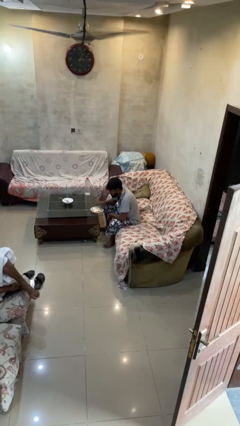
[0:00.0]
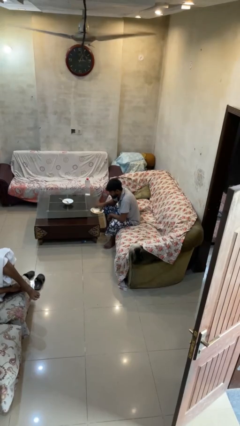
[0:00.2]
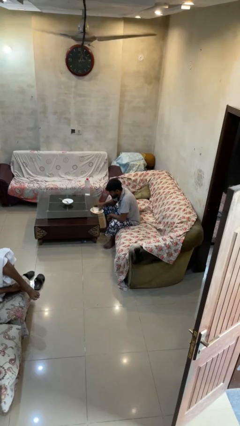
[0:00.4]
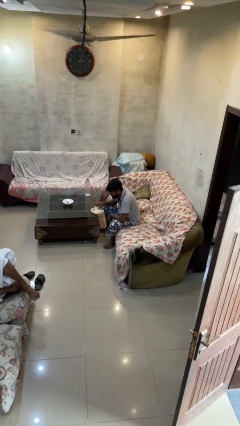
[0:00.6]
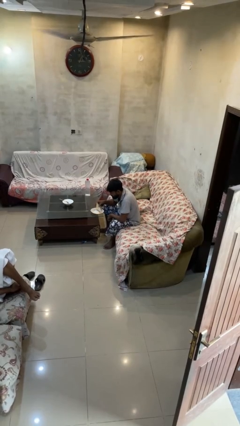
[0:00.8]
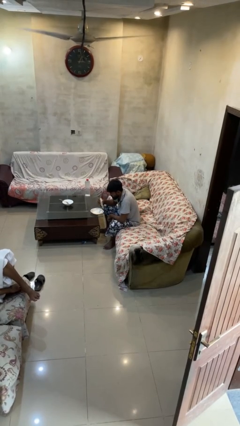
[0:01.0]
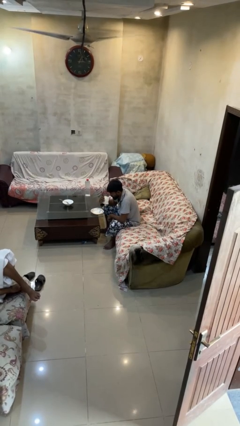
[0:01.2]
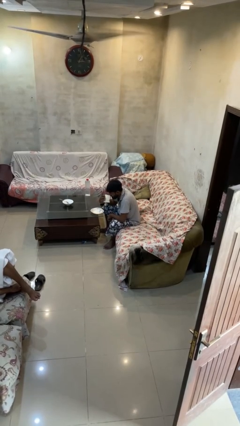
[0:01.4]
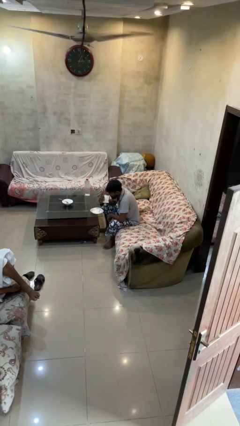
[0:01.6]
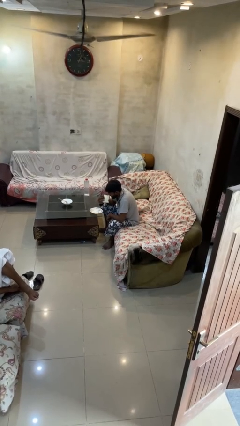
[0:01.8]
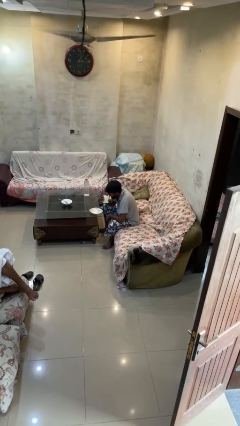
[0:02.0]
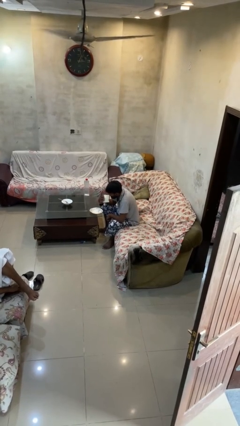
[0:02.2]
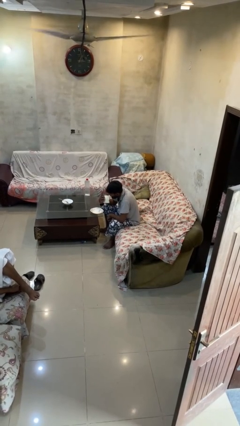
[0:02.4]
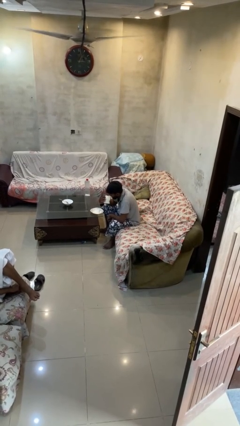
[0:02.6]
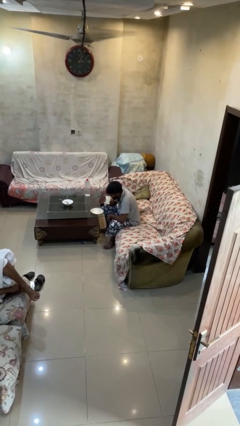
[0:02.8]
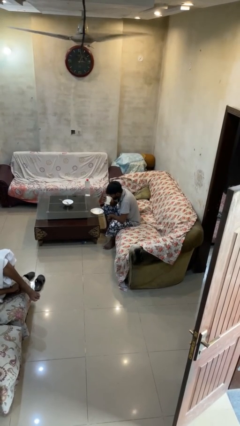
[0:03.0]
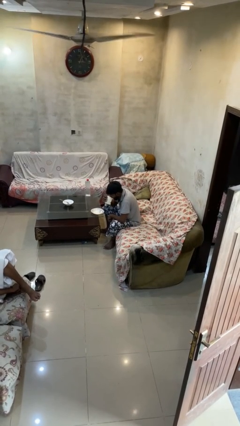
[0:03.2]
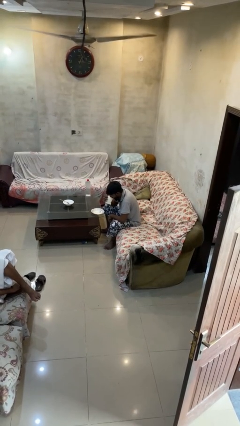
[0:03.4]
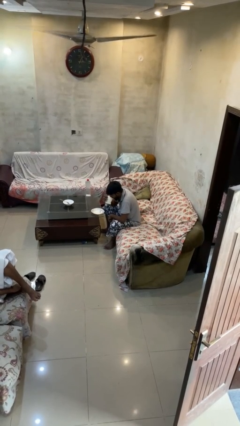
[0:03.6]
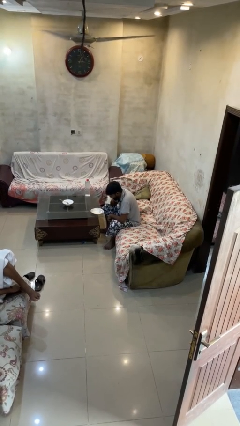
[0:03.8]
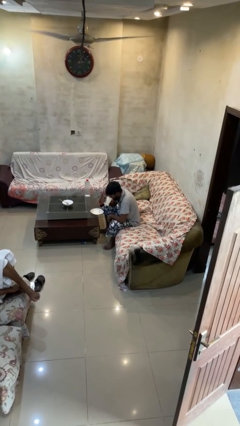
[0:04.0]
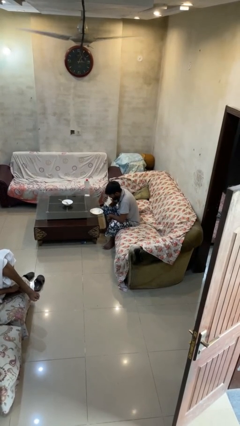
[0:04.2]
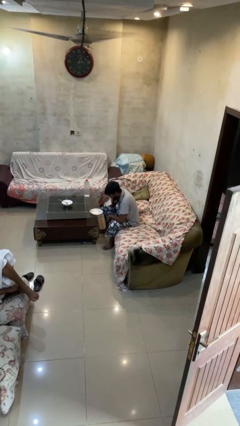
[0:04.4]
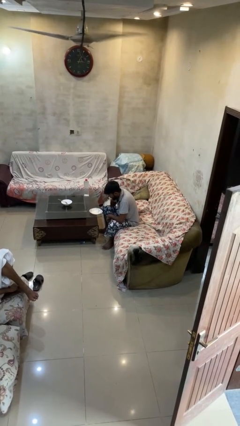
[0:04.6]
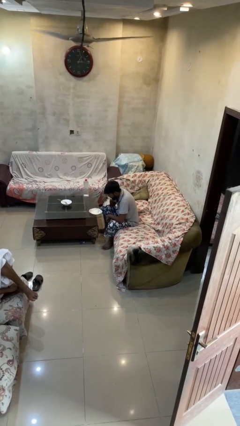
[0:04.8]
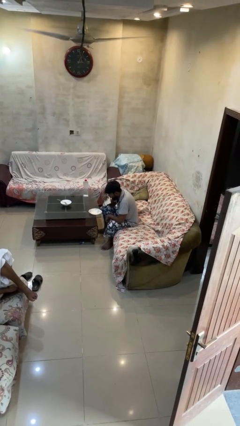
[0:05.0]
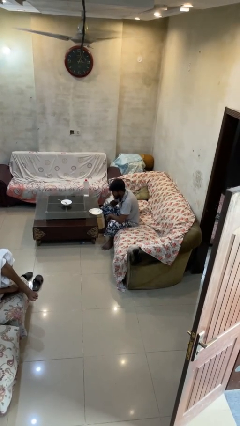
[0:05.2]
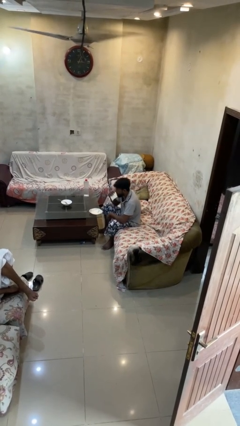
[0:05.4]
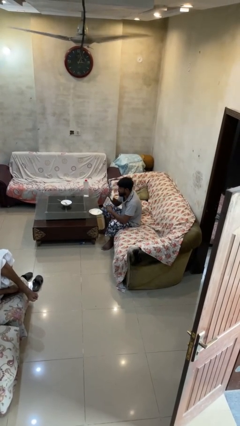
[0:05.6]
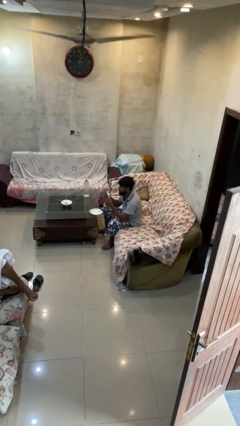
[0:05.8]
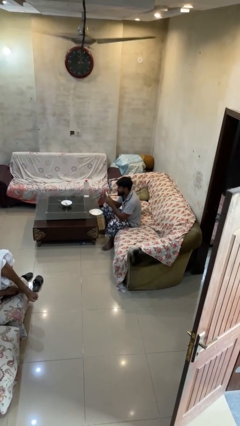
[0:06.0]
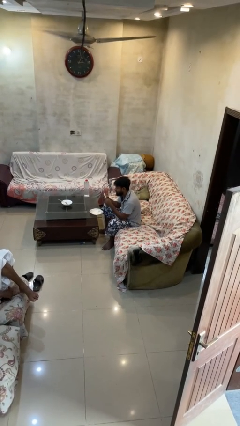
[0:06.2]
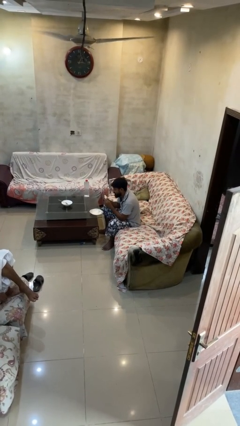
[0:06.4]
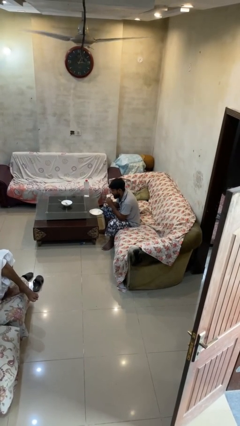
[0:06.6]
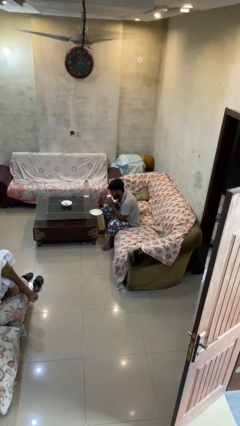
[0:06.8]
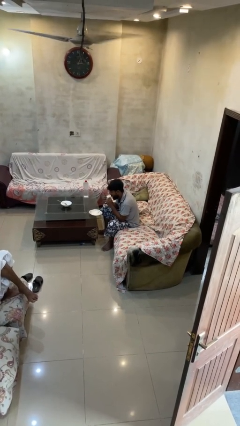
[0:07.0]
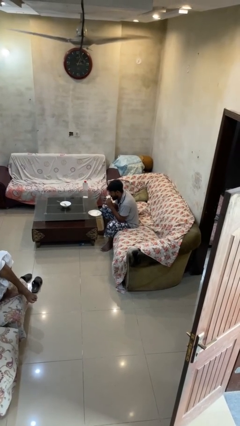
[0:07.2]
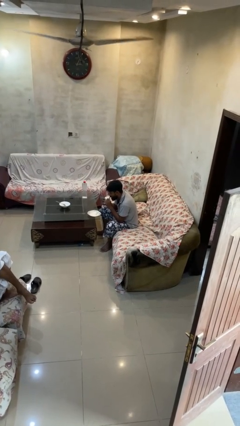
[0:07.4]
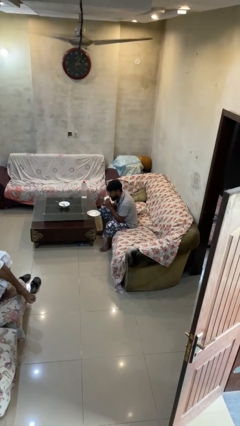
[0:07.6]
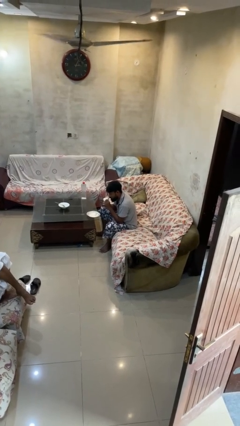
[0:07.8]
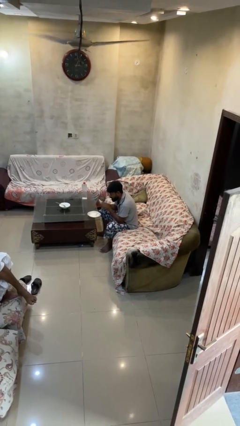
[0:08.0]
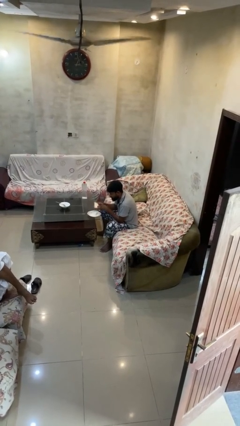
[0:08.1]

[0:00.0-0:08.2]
person eats with hands

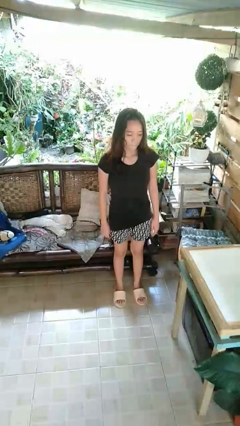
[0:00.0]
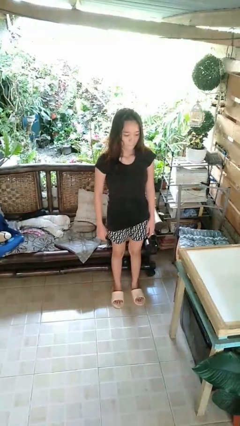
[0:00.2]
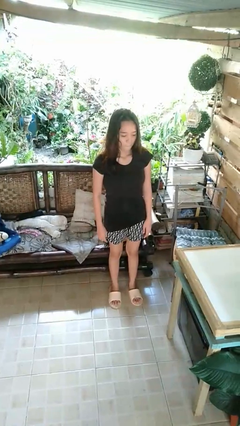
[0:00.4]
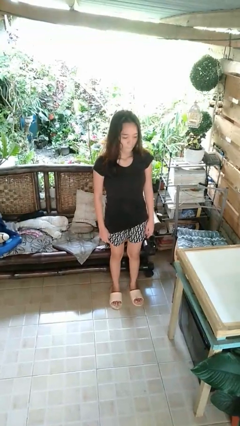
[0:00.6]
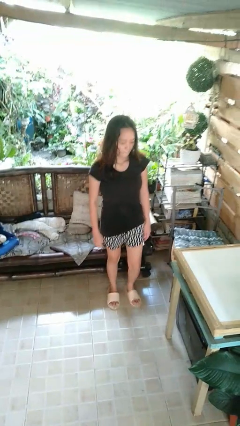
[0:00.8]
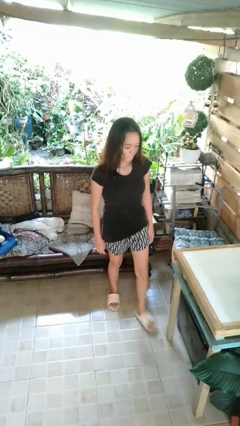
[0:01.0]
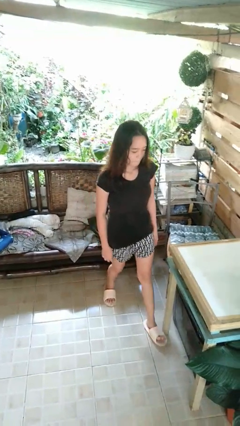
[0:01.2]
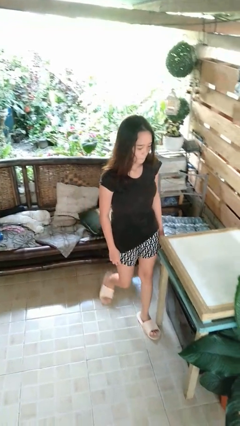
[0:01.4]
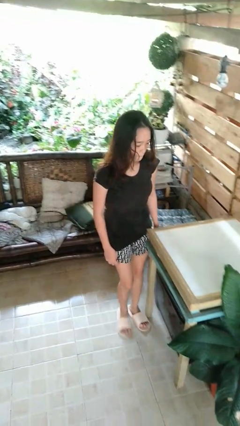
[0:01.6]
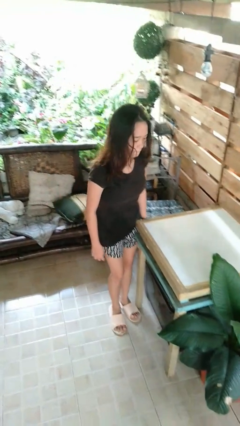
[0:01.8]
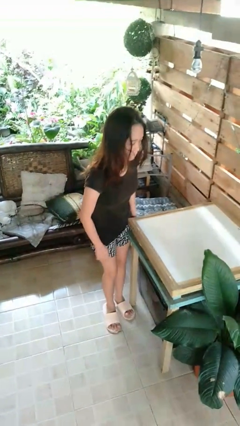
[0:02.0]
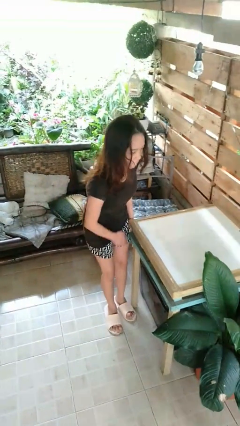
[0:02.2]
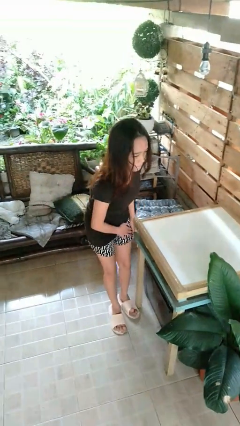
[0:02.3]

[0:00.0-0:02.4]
person bumps into table

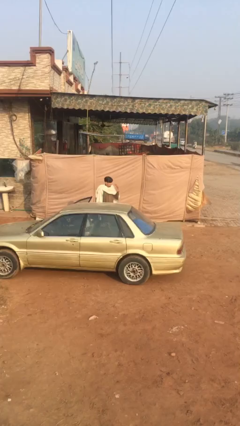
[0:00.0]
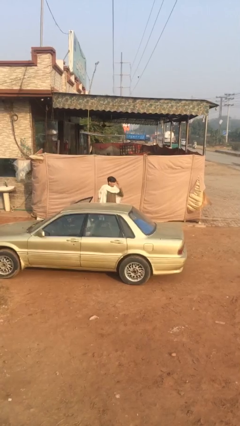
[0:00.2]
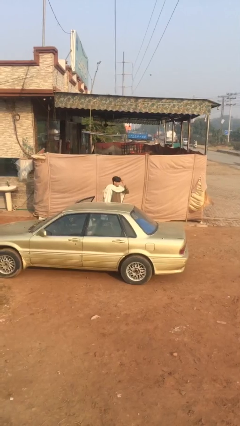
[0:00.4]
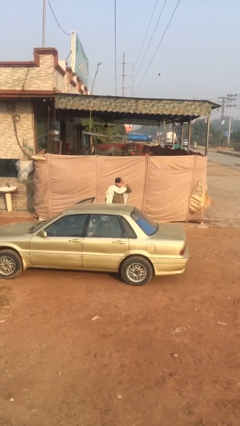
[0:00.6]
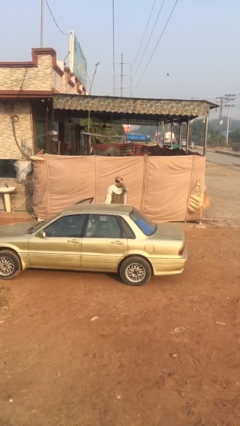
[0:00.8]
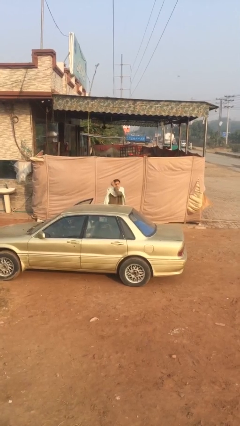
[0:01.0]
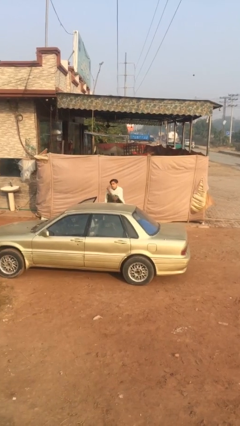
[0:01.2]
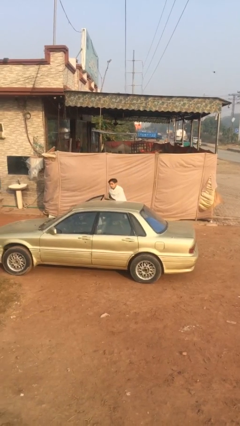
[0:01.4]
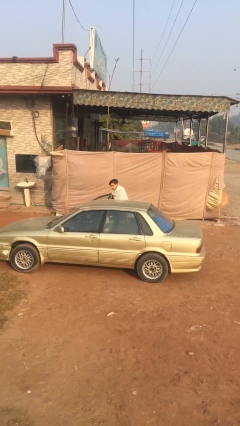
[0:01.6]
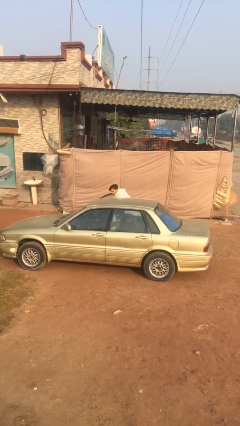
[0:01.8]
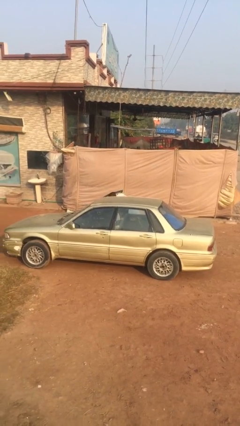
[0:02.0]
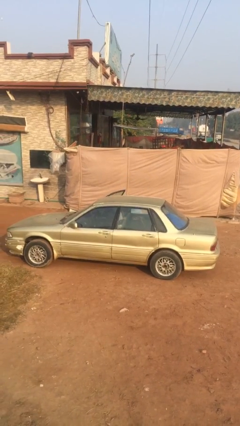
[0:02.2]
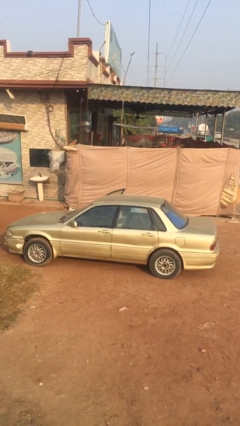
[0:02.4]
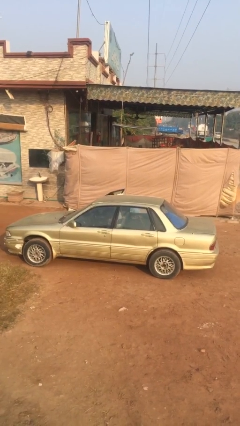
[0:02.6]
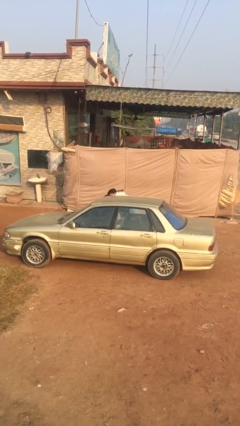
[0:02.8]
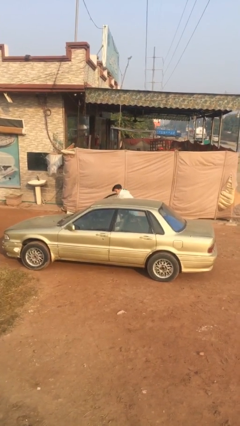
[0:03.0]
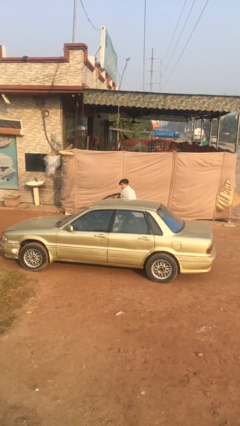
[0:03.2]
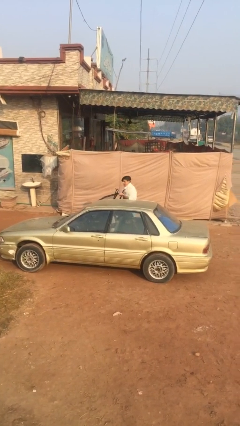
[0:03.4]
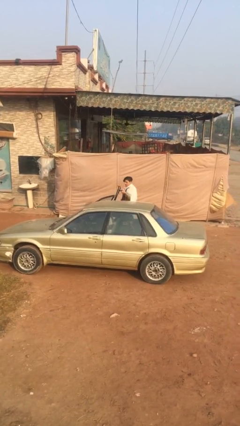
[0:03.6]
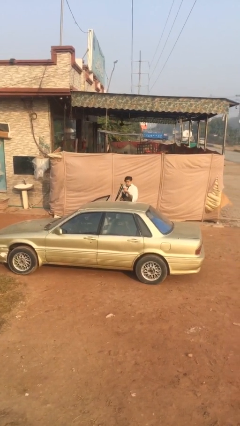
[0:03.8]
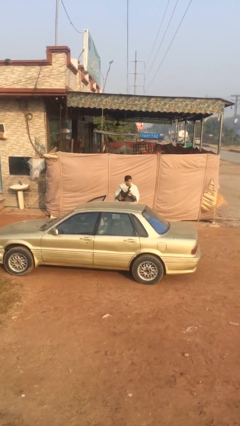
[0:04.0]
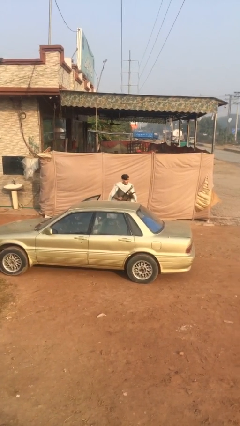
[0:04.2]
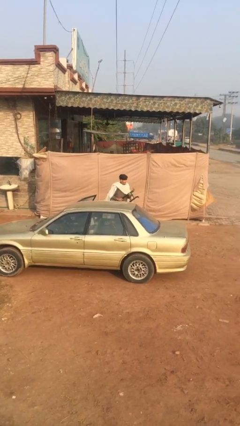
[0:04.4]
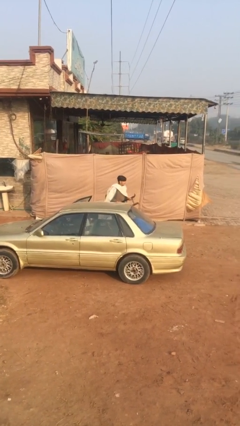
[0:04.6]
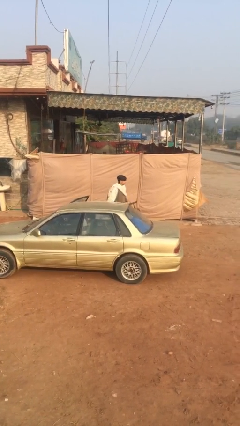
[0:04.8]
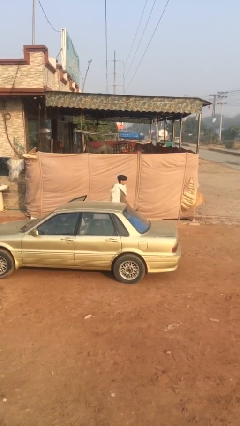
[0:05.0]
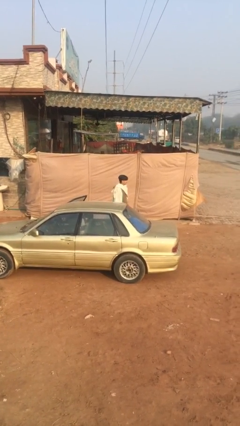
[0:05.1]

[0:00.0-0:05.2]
person unloads car

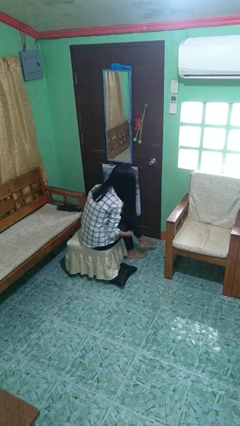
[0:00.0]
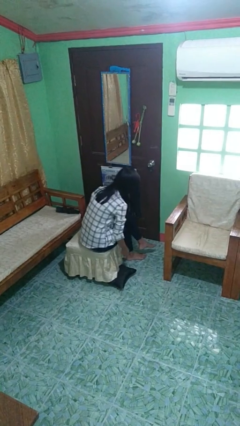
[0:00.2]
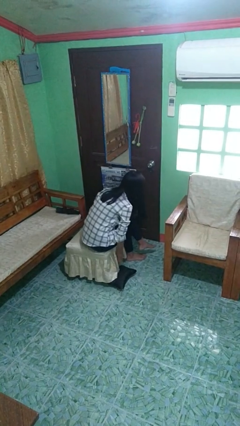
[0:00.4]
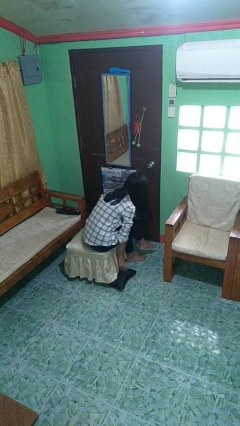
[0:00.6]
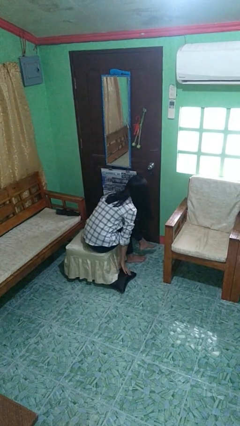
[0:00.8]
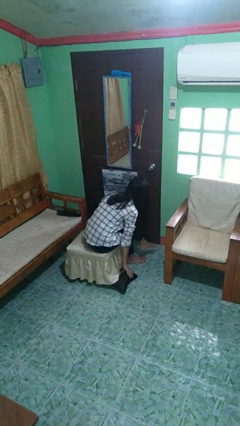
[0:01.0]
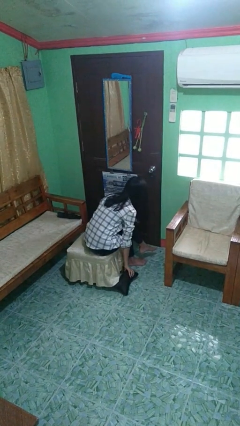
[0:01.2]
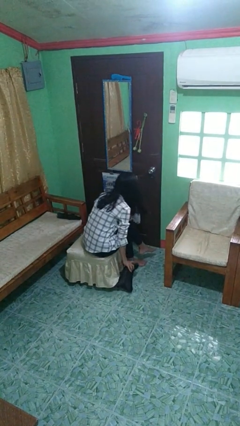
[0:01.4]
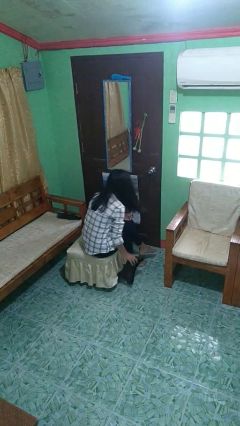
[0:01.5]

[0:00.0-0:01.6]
person picks up object from floor
